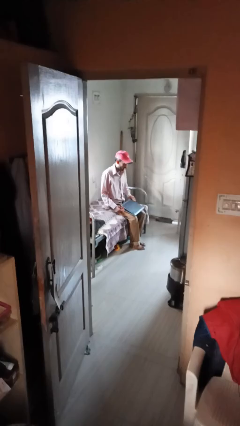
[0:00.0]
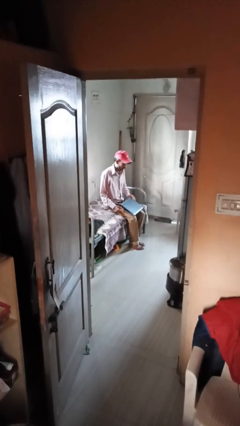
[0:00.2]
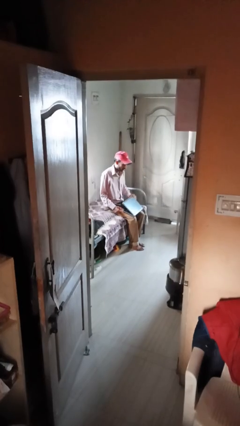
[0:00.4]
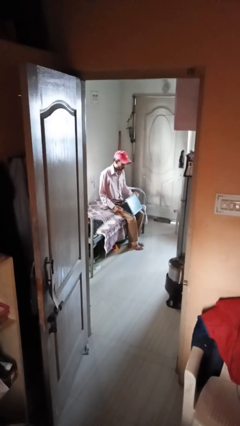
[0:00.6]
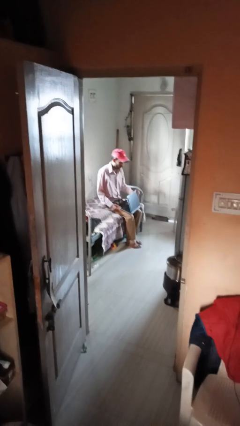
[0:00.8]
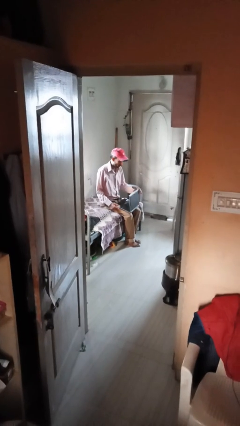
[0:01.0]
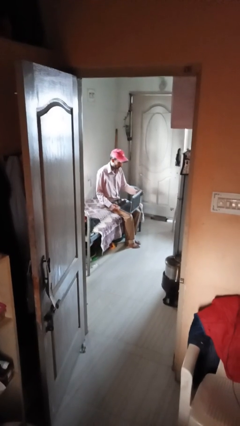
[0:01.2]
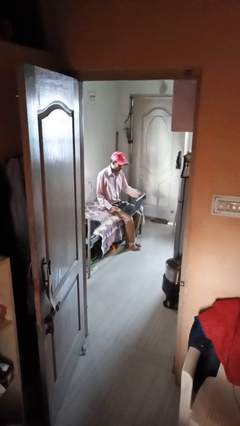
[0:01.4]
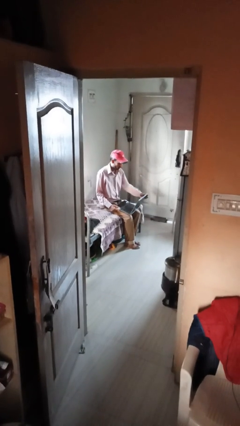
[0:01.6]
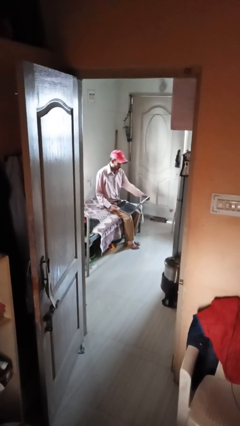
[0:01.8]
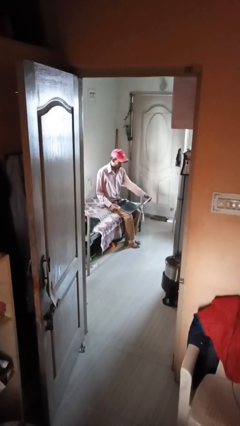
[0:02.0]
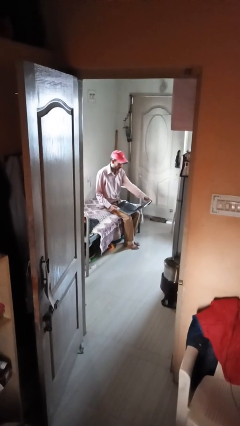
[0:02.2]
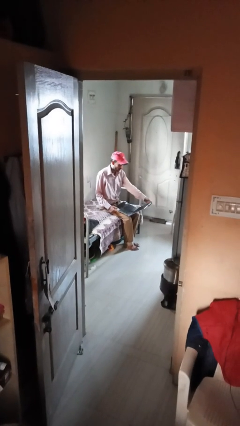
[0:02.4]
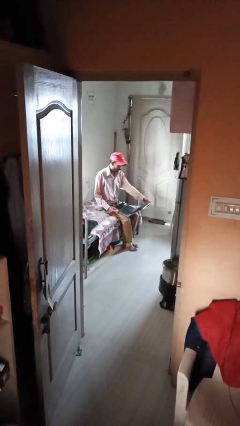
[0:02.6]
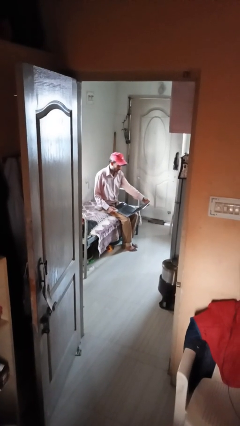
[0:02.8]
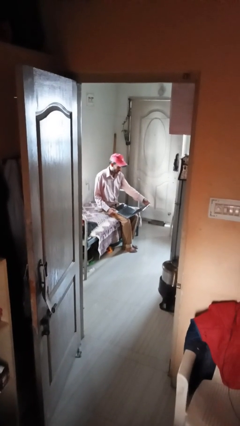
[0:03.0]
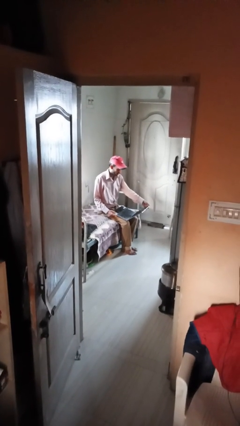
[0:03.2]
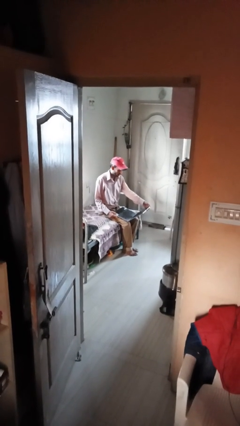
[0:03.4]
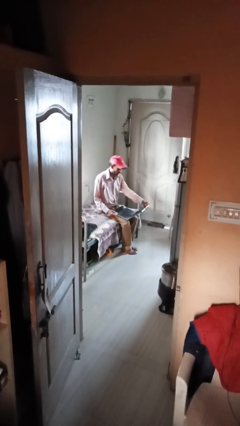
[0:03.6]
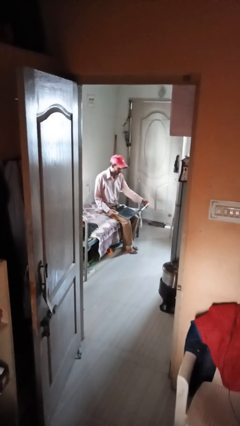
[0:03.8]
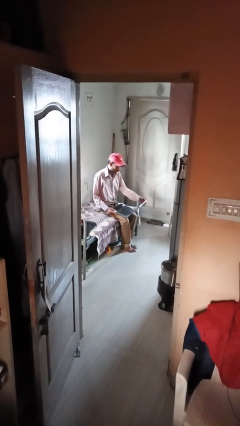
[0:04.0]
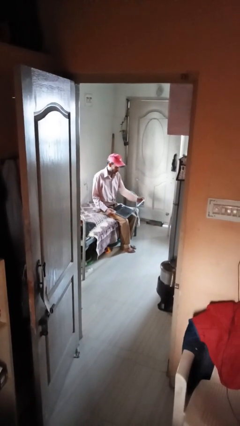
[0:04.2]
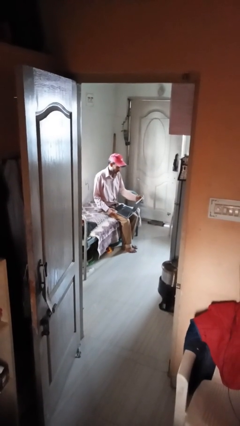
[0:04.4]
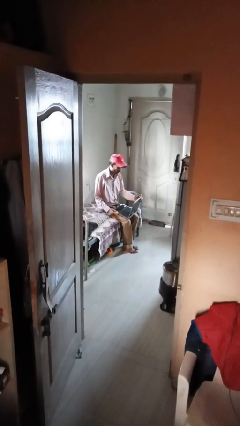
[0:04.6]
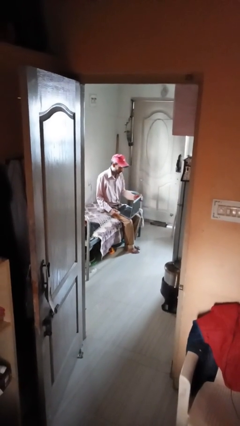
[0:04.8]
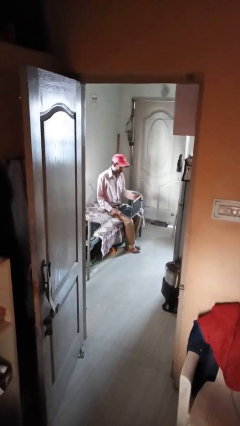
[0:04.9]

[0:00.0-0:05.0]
person opens laptop

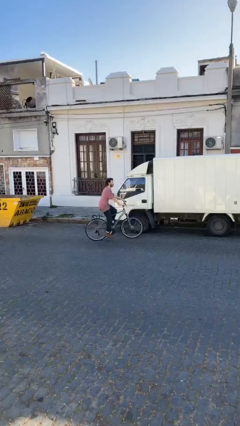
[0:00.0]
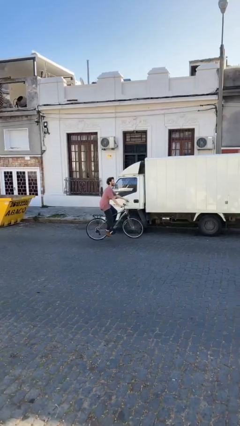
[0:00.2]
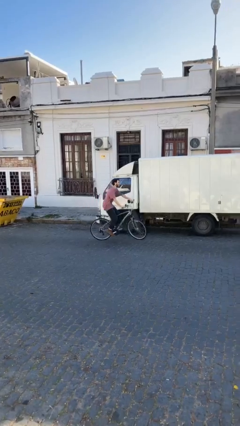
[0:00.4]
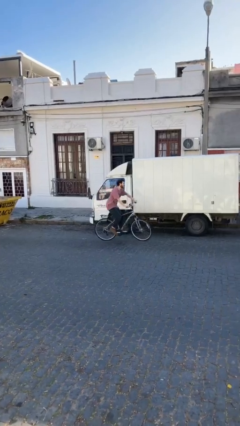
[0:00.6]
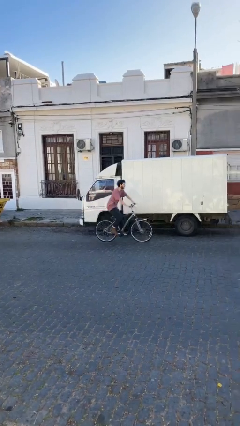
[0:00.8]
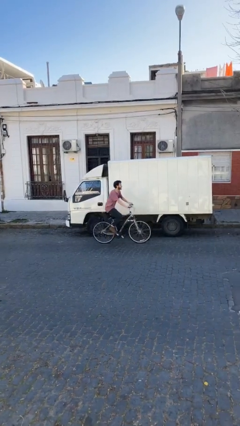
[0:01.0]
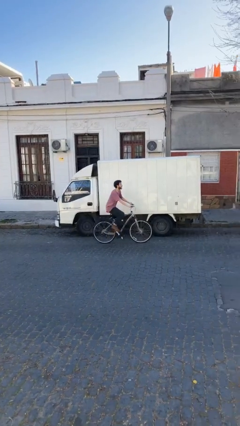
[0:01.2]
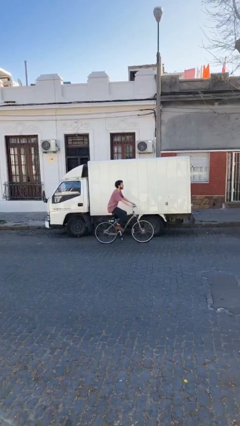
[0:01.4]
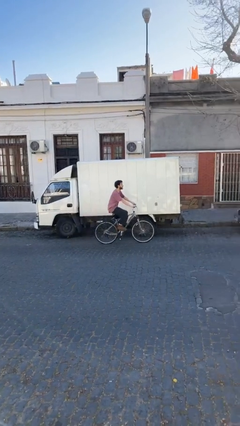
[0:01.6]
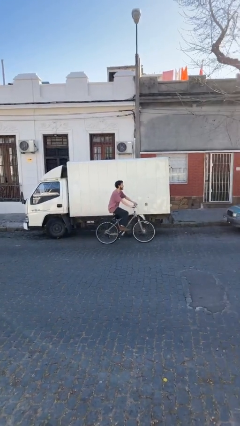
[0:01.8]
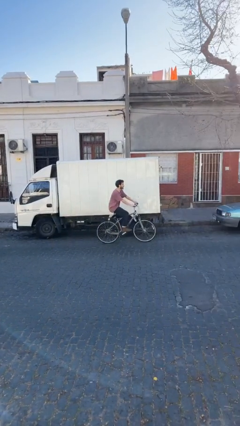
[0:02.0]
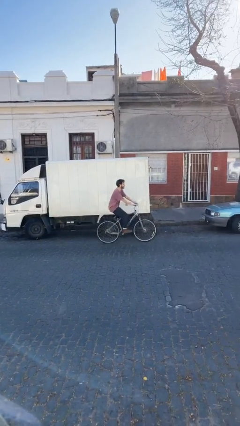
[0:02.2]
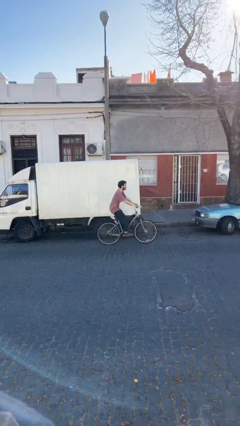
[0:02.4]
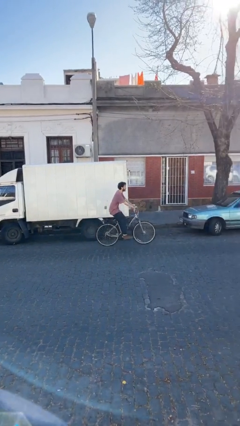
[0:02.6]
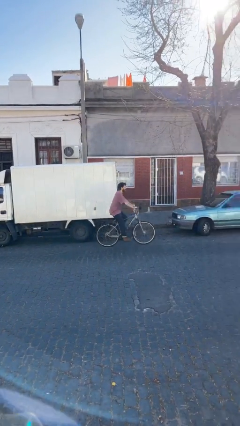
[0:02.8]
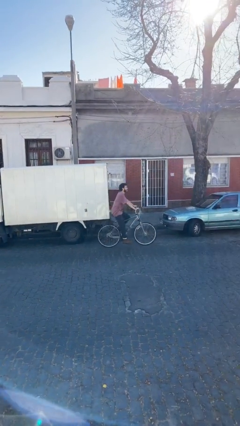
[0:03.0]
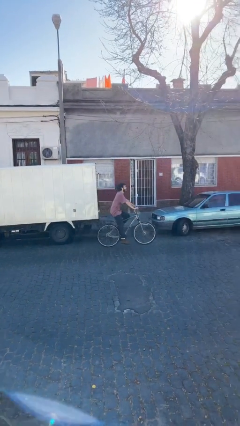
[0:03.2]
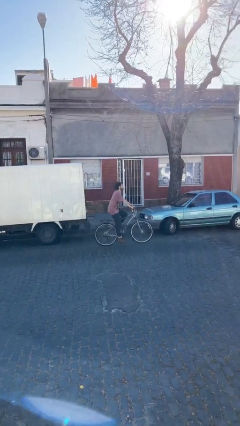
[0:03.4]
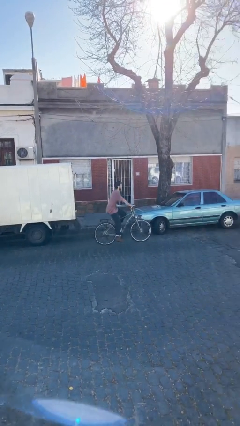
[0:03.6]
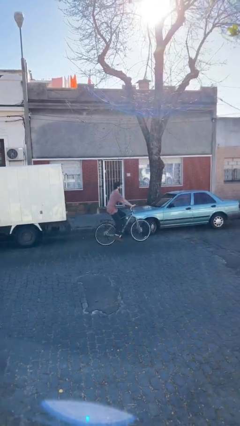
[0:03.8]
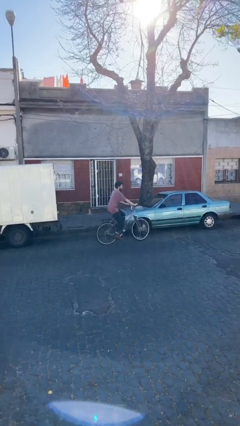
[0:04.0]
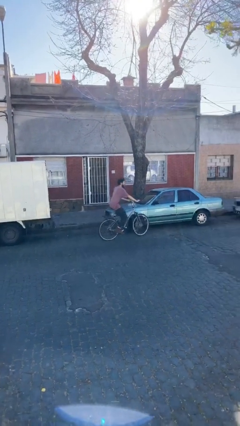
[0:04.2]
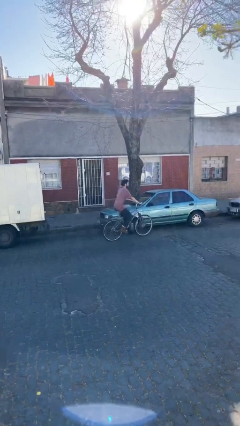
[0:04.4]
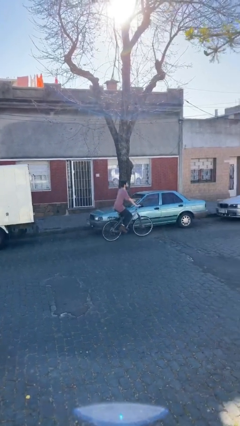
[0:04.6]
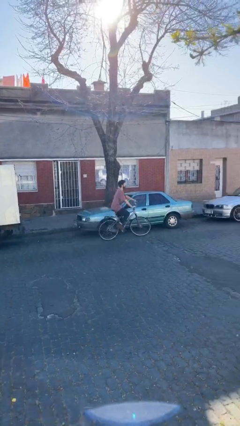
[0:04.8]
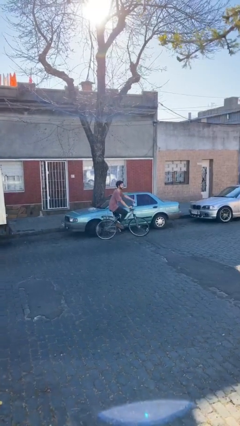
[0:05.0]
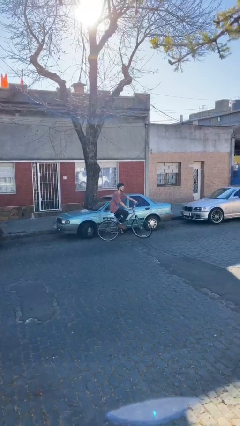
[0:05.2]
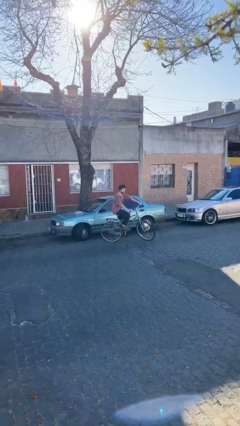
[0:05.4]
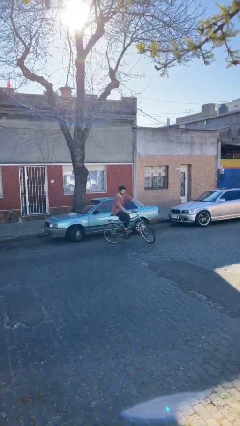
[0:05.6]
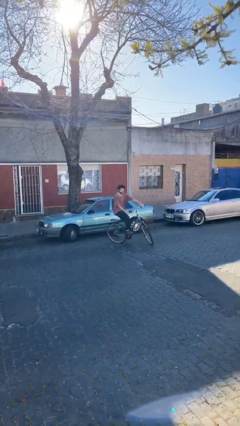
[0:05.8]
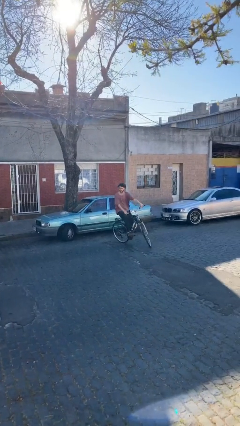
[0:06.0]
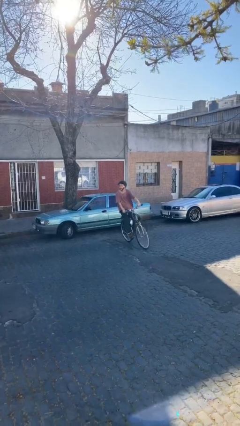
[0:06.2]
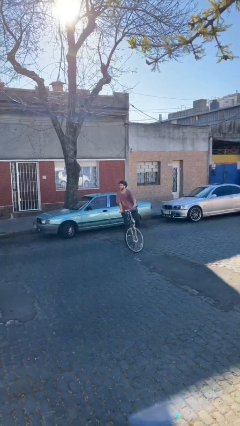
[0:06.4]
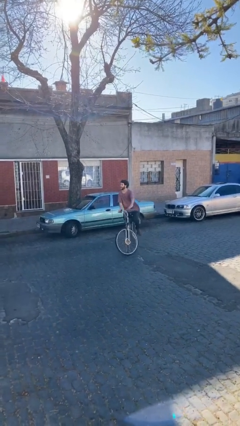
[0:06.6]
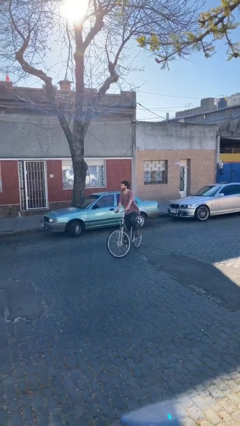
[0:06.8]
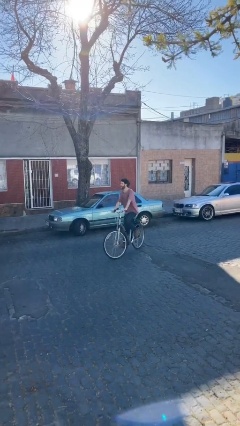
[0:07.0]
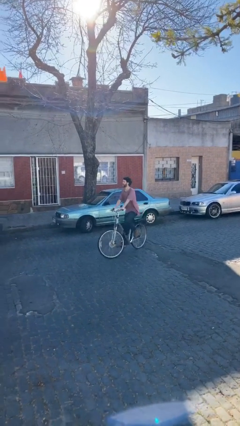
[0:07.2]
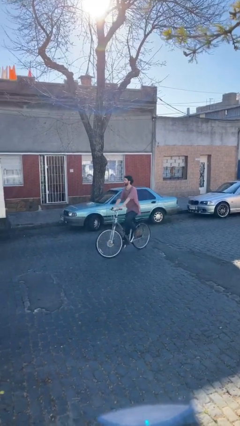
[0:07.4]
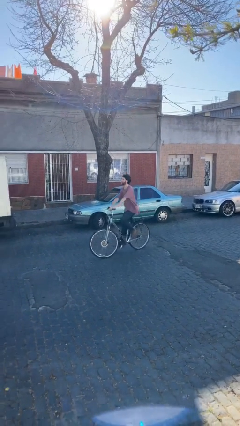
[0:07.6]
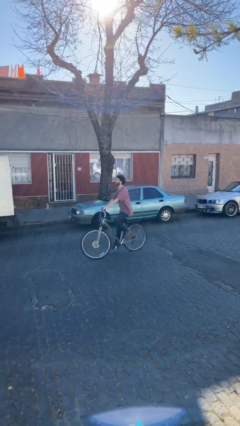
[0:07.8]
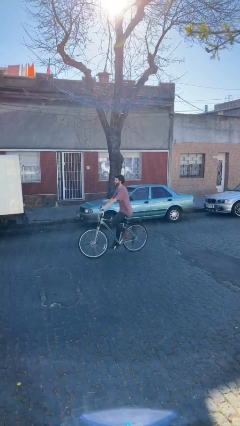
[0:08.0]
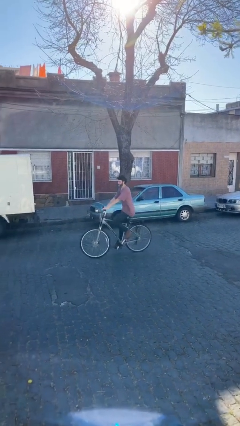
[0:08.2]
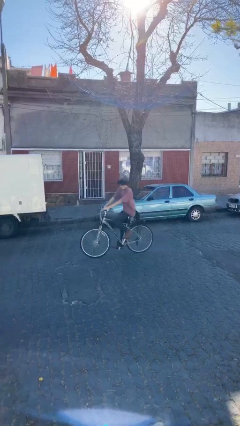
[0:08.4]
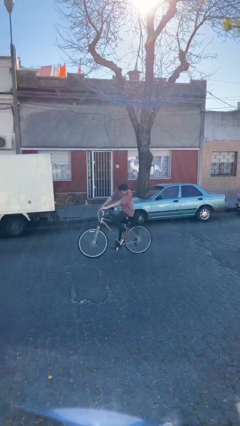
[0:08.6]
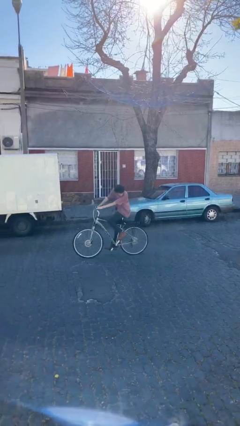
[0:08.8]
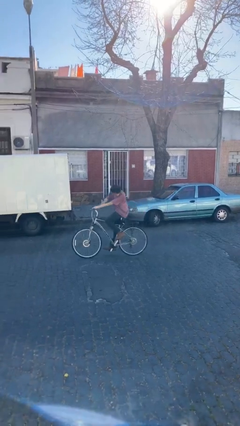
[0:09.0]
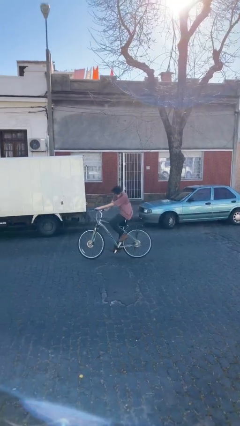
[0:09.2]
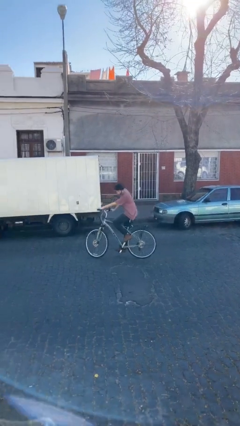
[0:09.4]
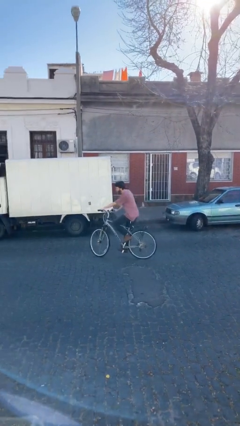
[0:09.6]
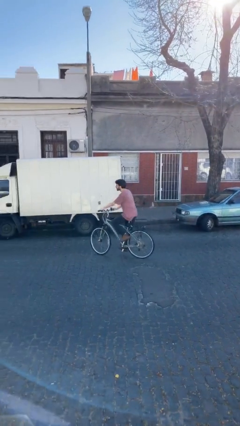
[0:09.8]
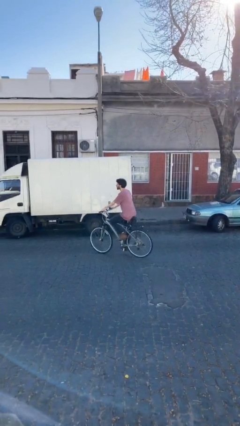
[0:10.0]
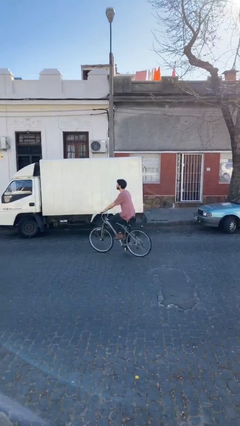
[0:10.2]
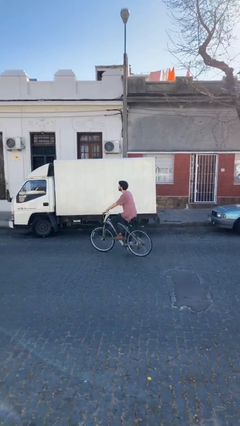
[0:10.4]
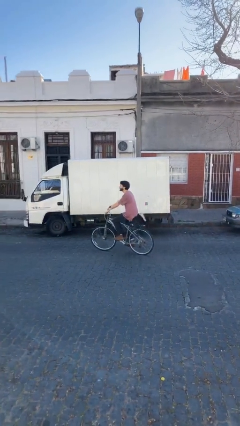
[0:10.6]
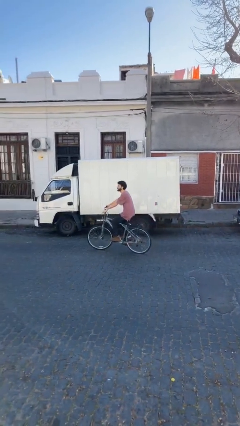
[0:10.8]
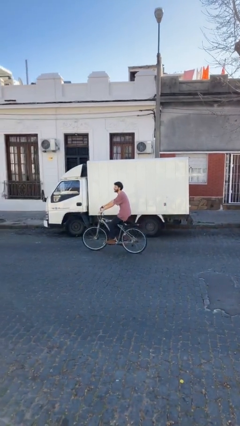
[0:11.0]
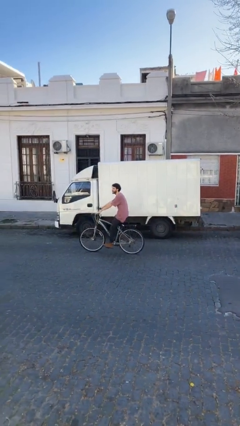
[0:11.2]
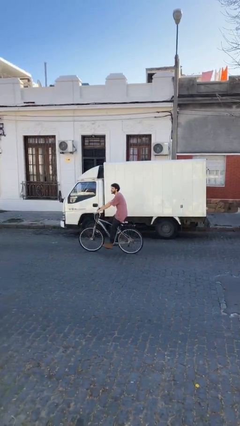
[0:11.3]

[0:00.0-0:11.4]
person rides bicycle

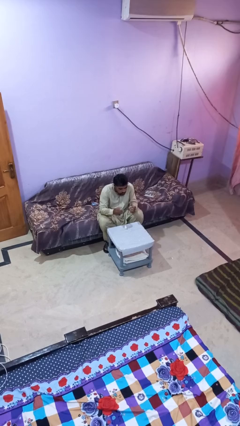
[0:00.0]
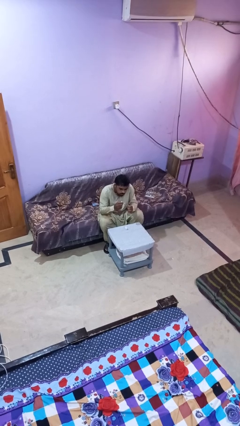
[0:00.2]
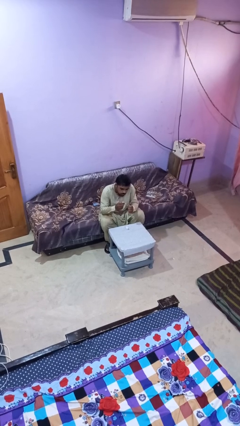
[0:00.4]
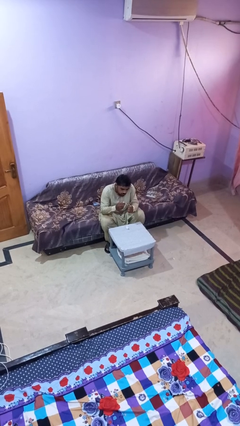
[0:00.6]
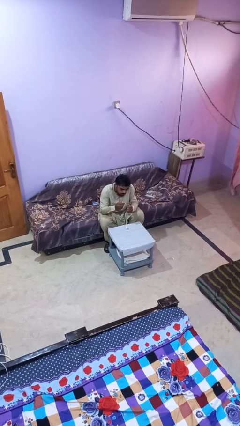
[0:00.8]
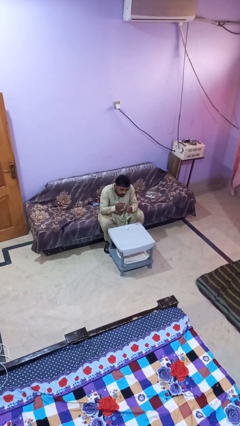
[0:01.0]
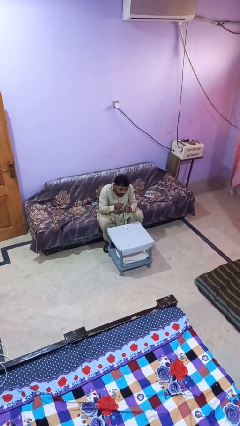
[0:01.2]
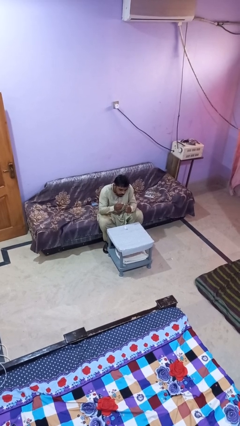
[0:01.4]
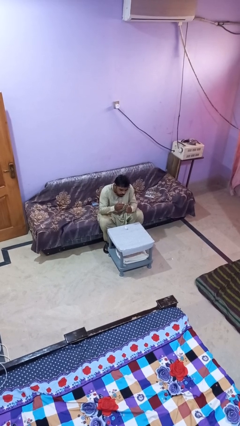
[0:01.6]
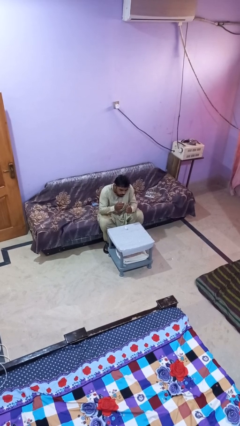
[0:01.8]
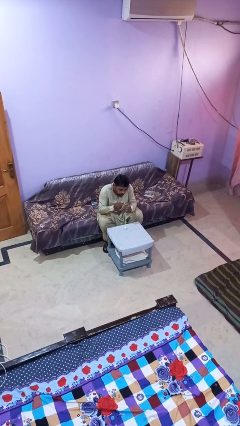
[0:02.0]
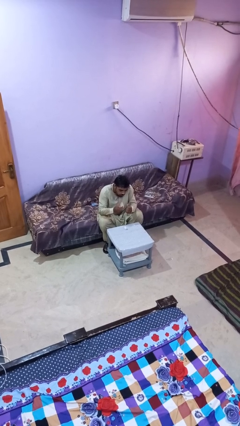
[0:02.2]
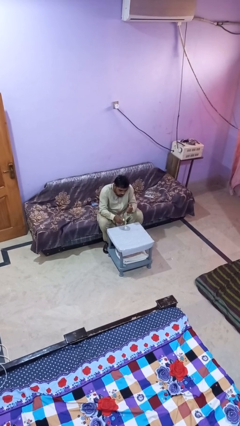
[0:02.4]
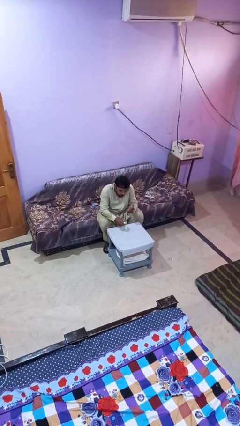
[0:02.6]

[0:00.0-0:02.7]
person paints fingernails
